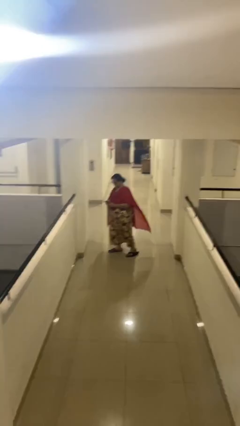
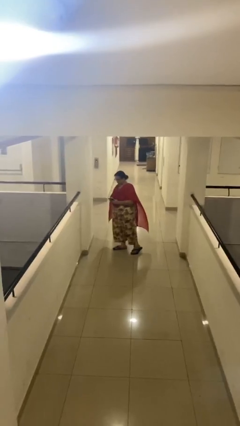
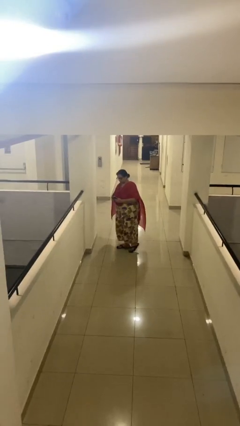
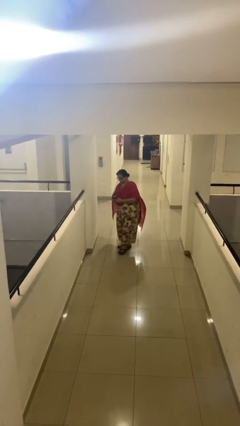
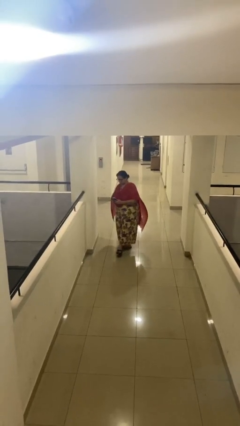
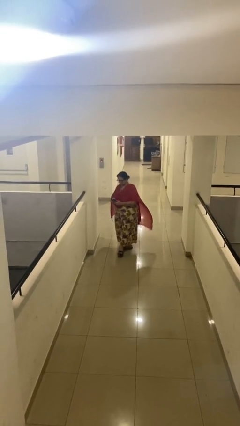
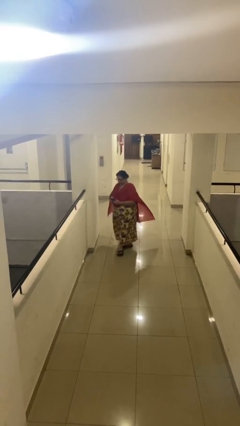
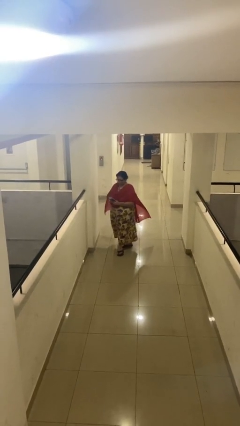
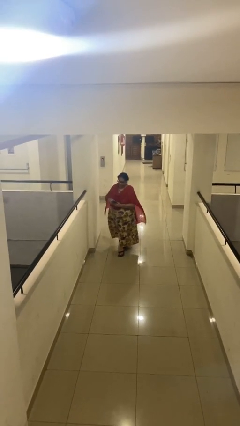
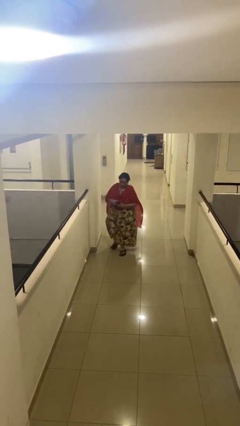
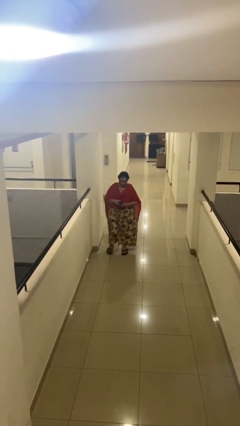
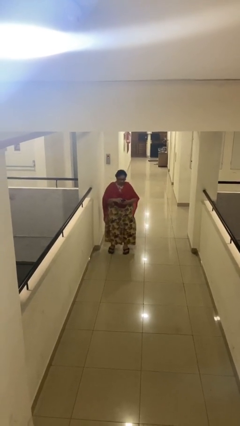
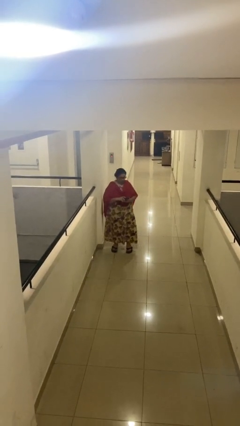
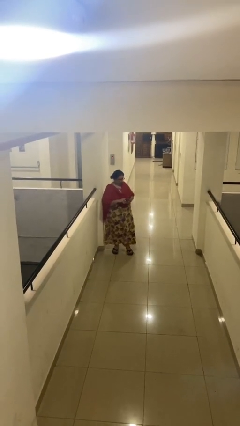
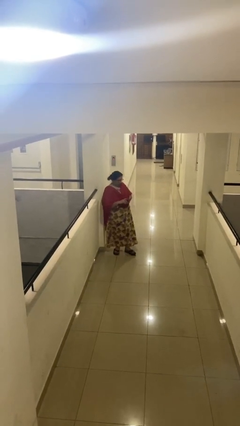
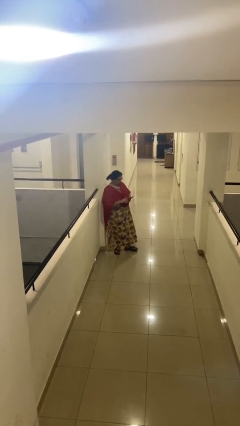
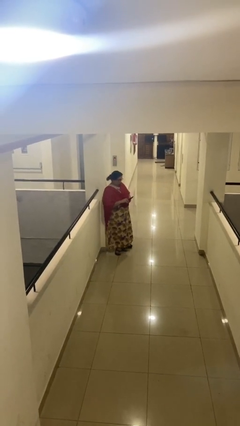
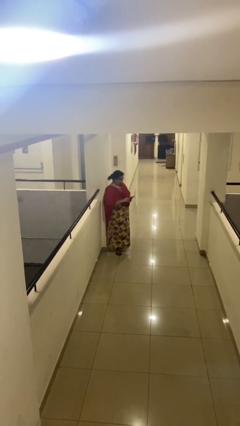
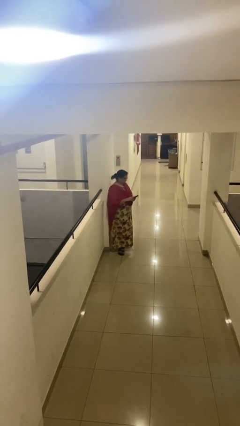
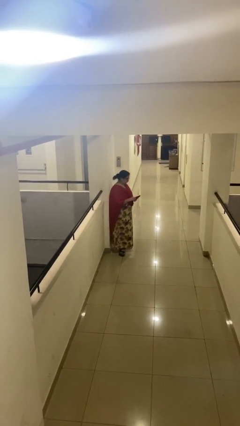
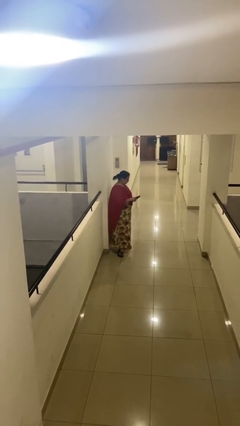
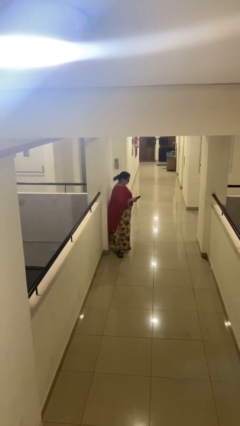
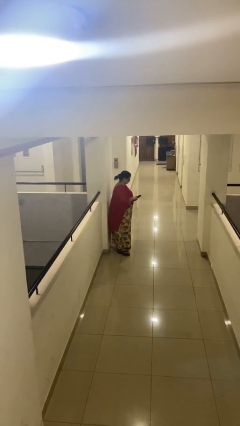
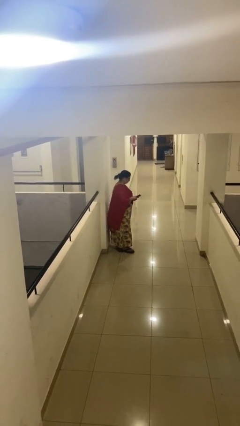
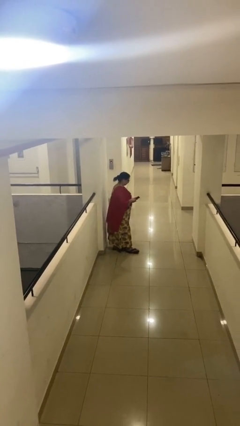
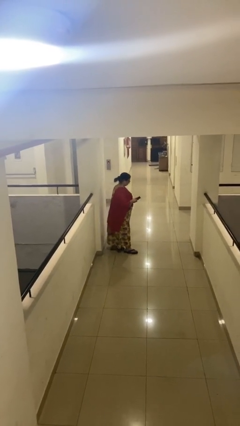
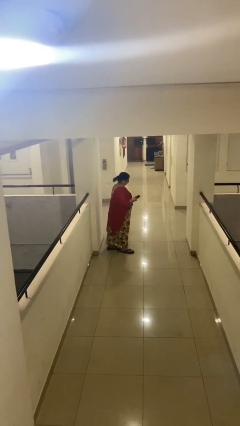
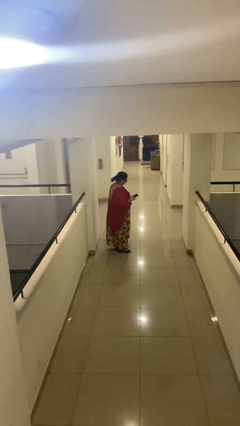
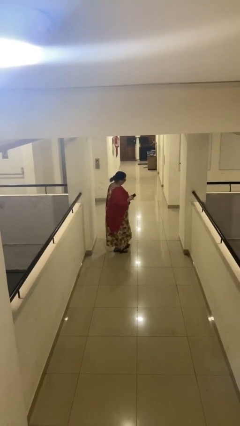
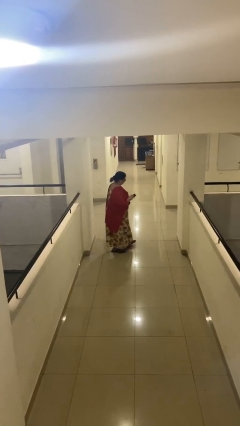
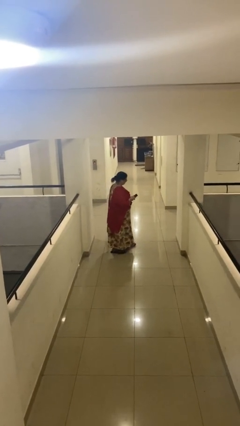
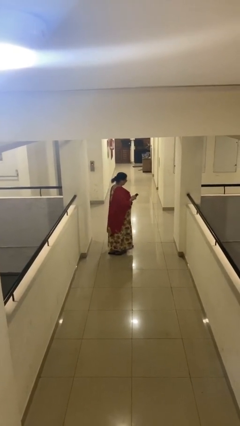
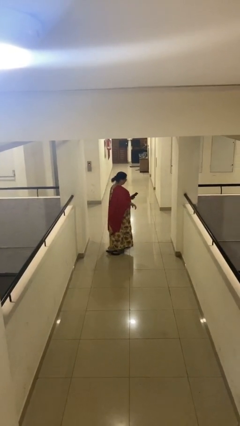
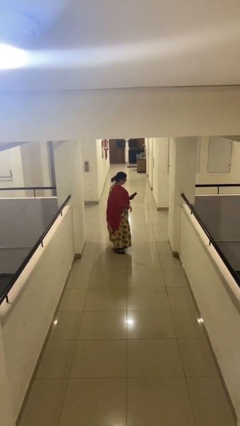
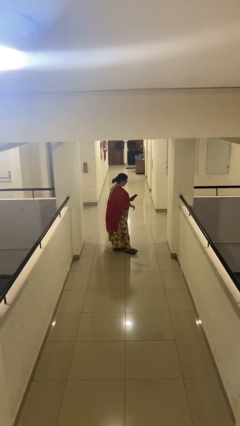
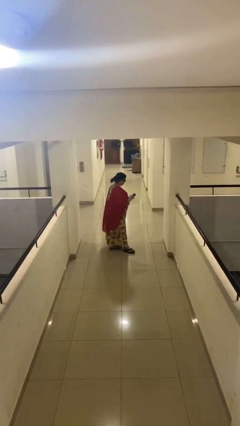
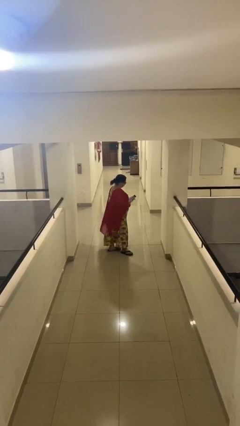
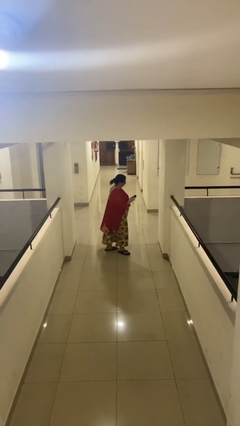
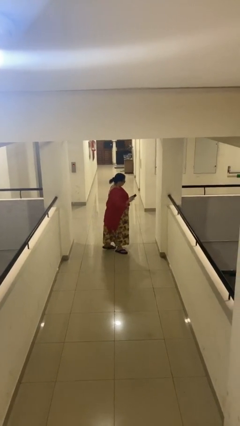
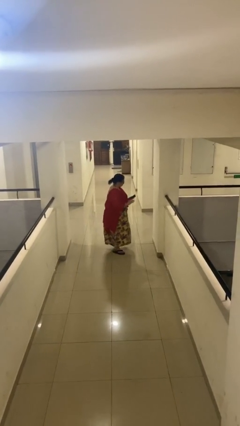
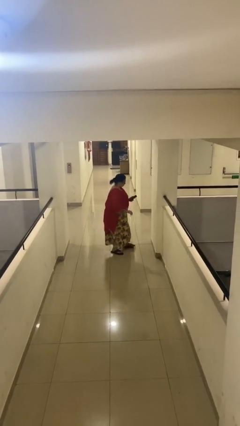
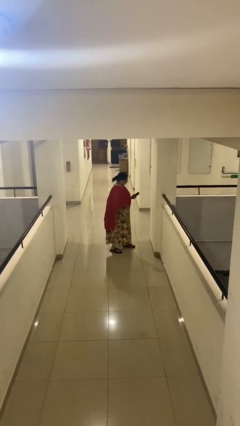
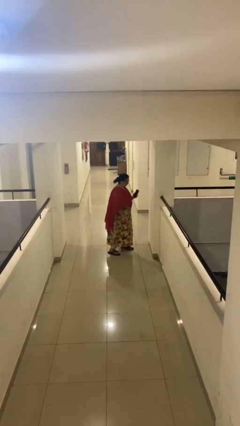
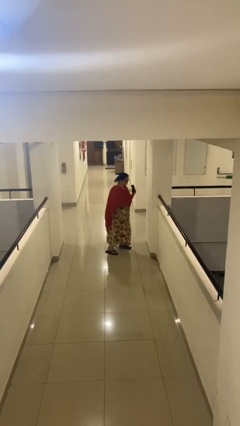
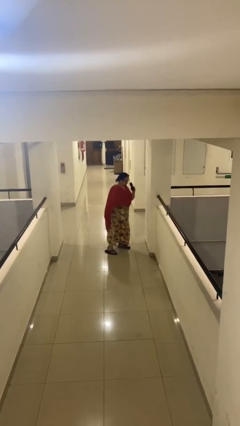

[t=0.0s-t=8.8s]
person texts on phone

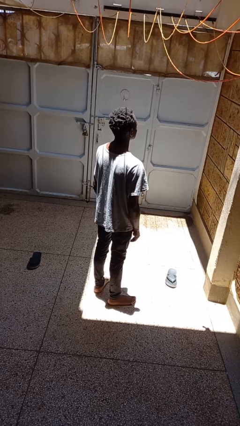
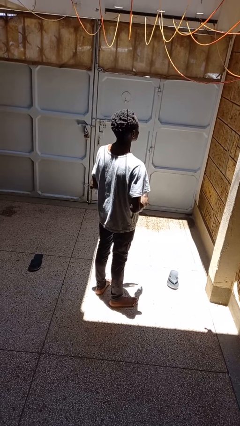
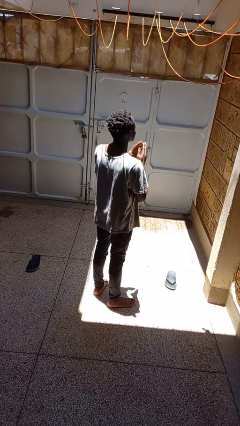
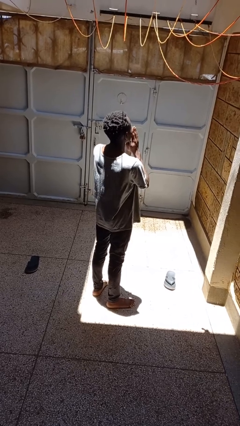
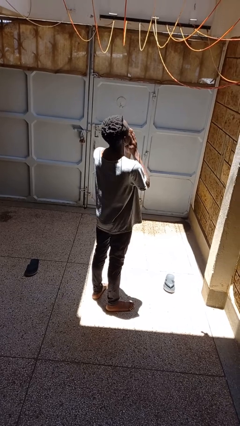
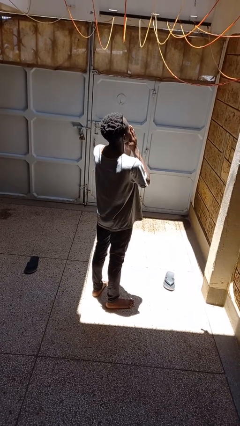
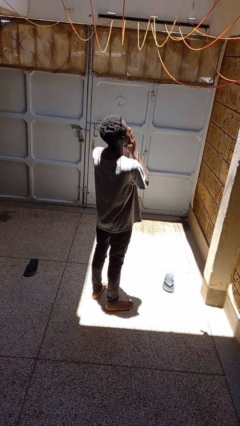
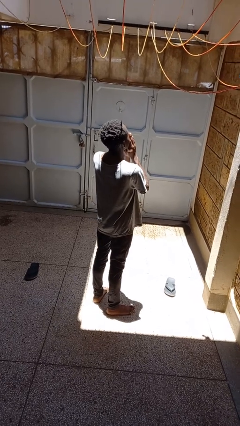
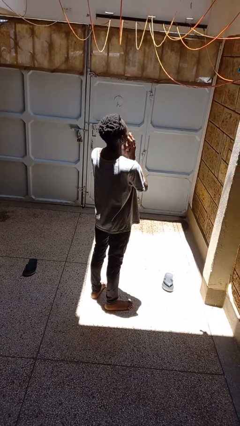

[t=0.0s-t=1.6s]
person prays

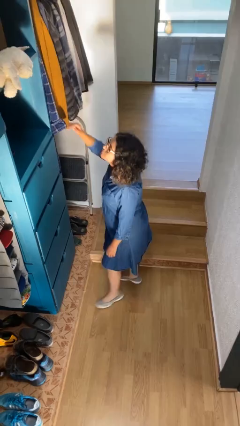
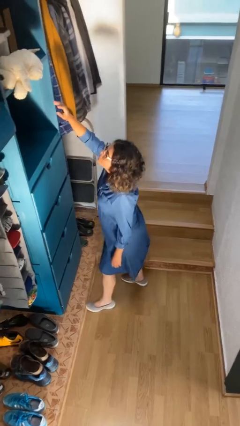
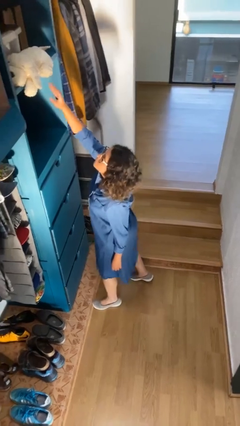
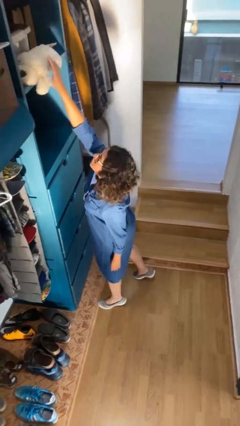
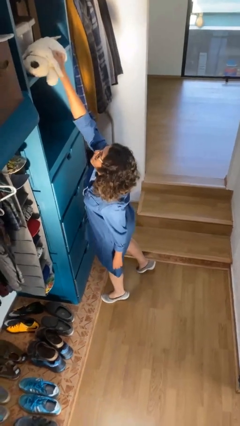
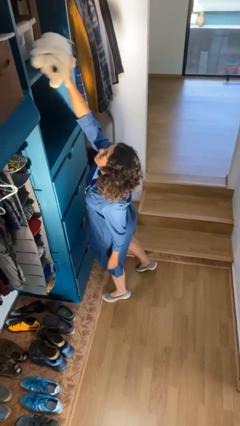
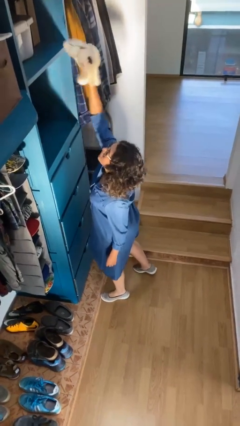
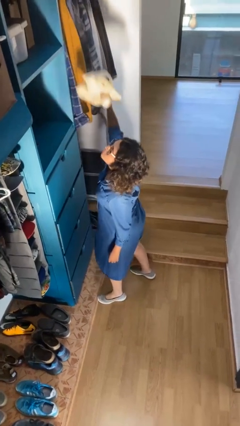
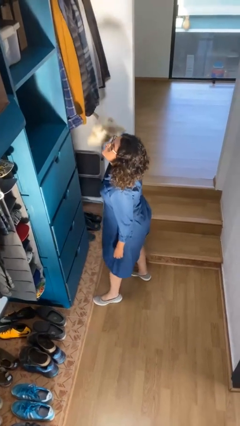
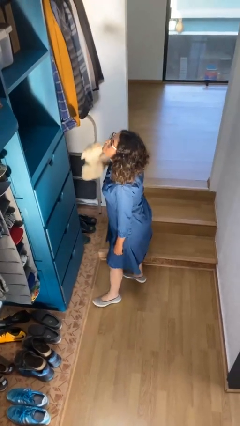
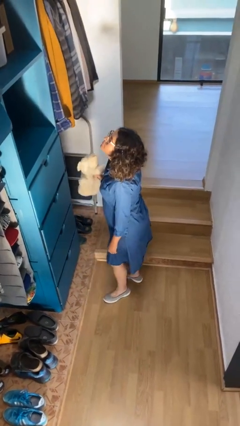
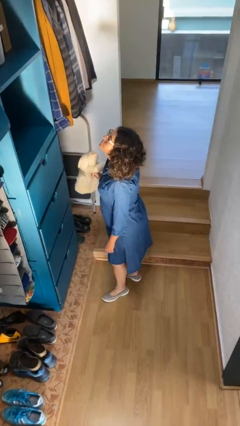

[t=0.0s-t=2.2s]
person picks up object from shelf

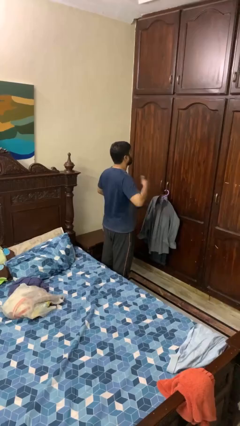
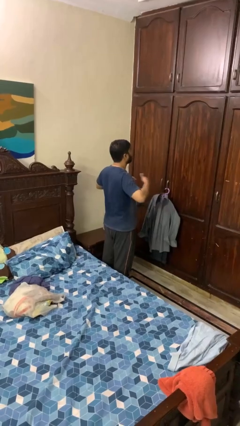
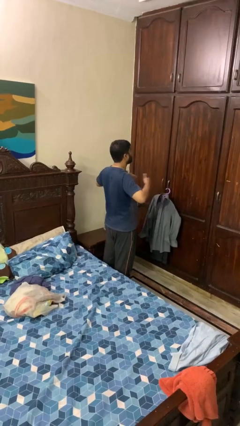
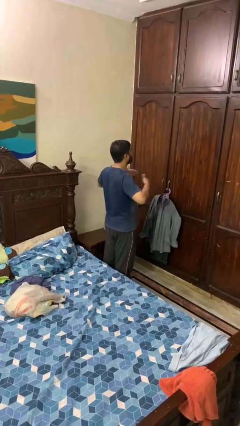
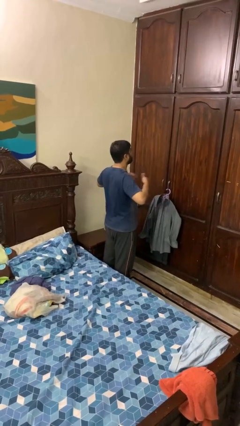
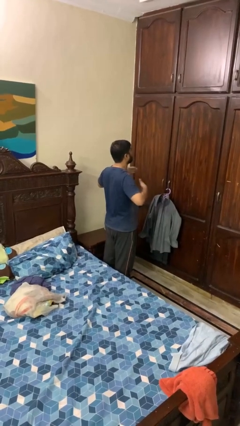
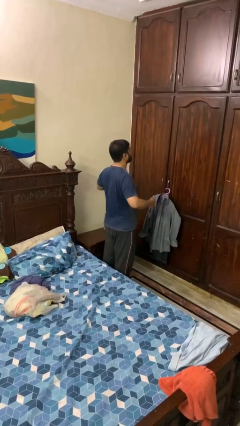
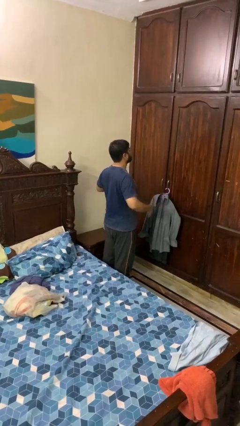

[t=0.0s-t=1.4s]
person drums on chest

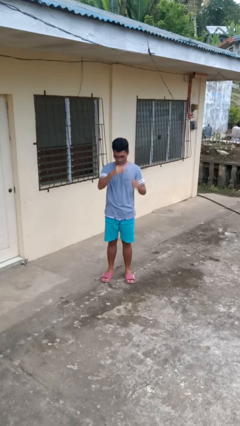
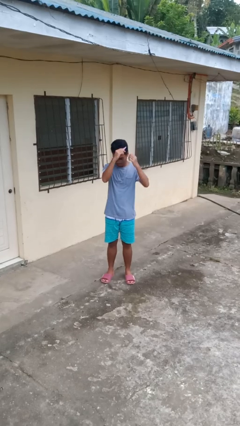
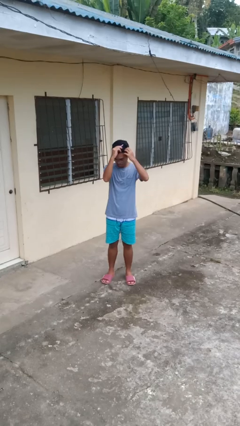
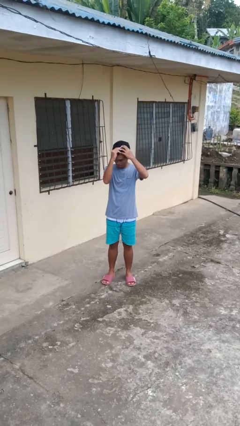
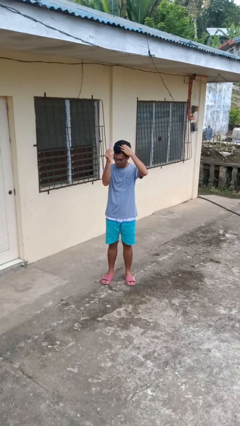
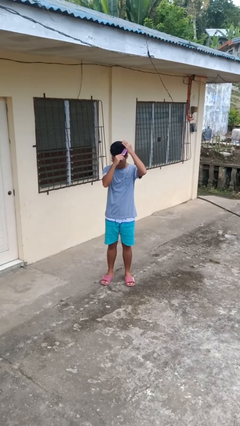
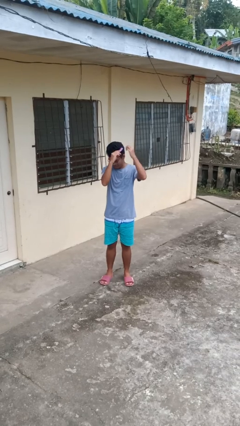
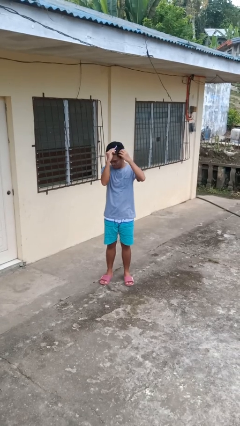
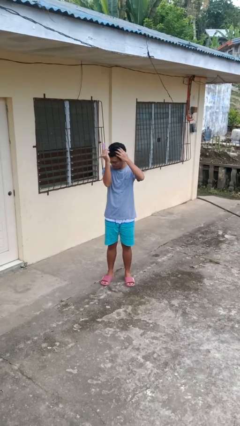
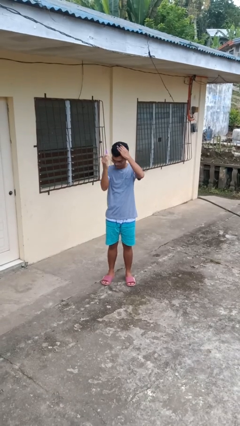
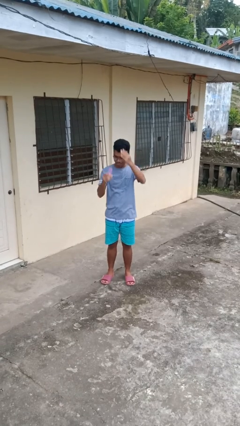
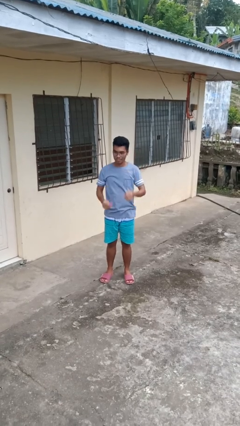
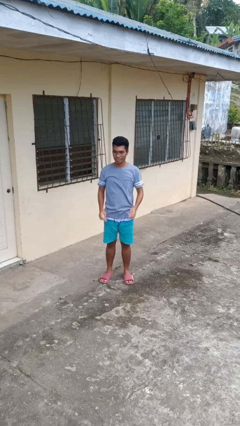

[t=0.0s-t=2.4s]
person brushes hair

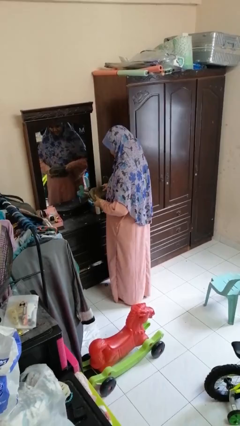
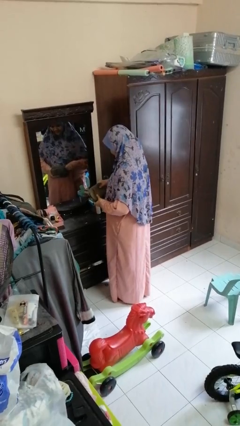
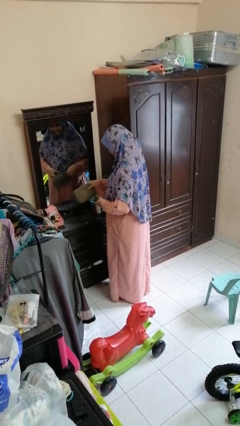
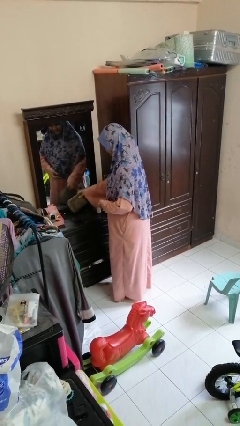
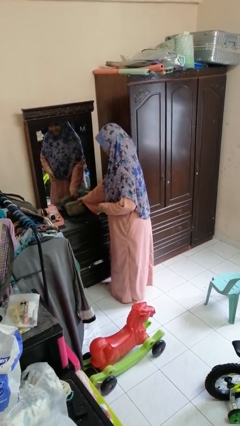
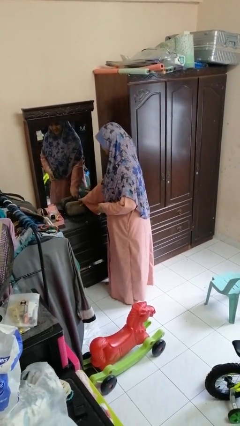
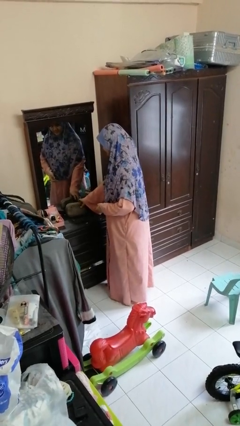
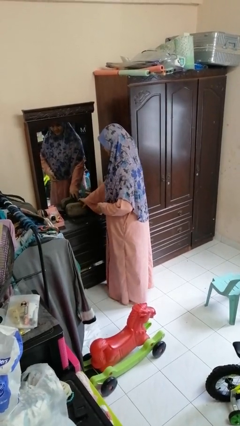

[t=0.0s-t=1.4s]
person puts down object on countertop
